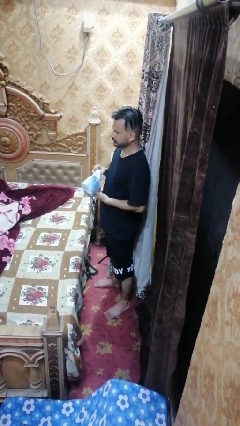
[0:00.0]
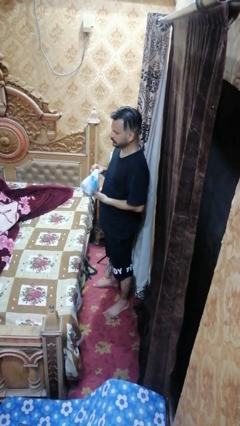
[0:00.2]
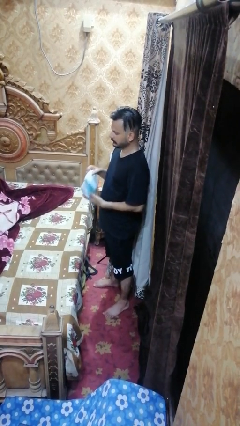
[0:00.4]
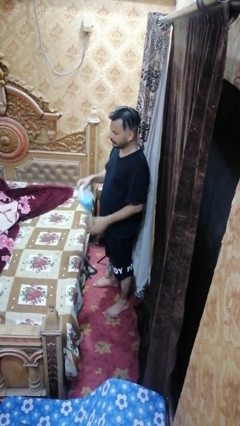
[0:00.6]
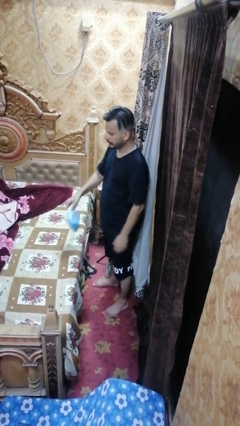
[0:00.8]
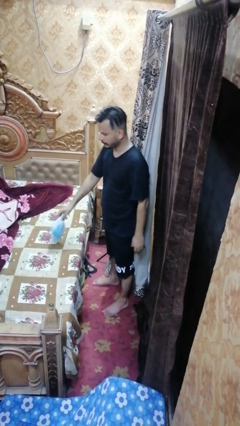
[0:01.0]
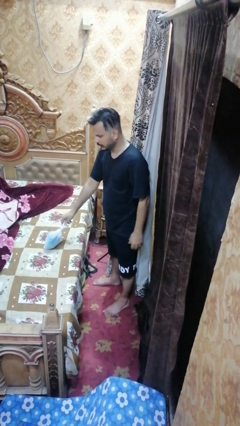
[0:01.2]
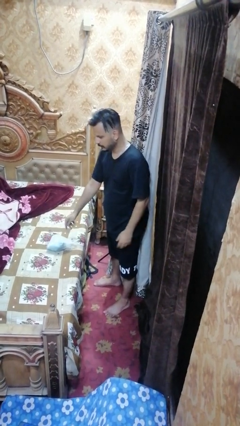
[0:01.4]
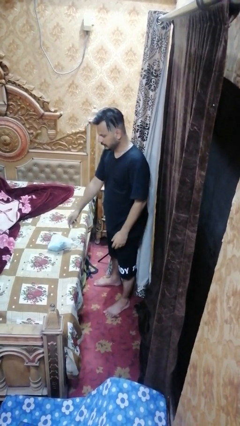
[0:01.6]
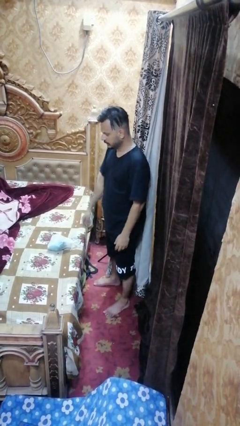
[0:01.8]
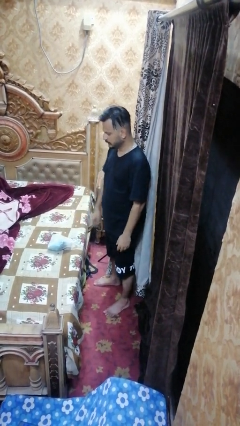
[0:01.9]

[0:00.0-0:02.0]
person puts down object on bed

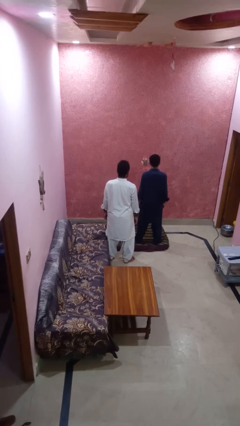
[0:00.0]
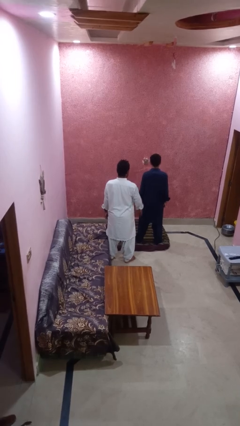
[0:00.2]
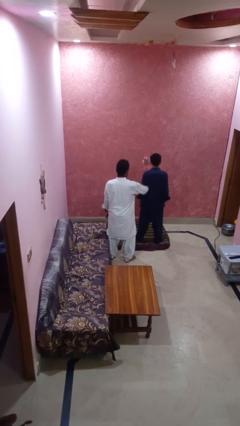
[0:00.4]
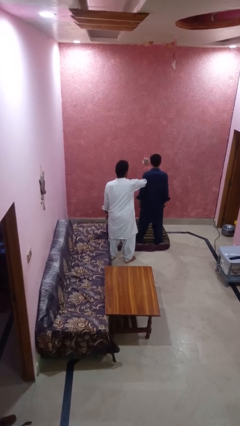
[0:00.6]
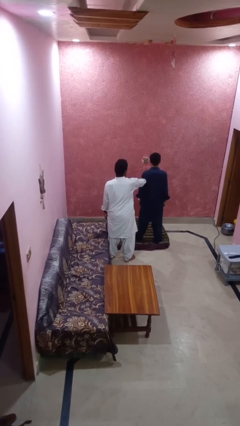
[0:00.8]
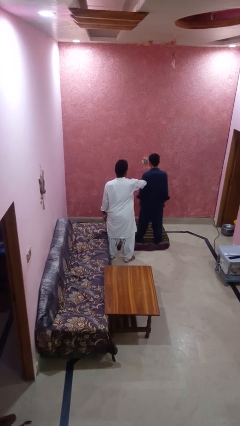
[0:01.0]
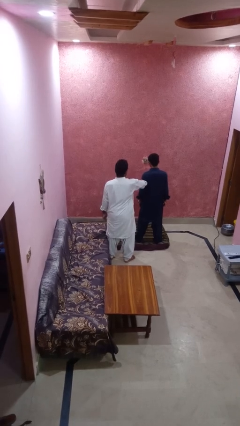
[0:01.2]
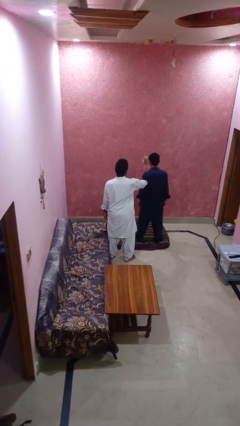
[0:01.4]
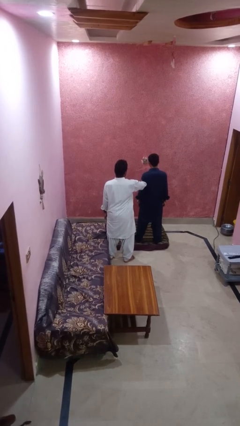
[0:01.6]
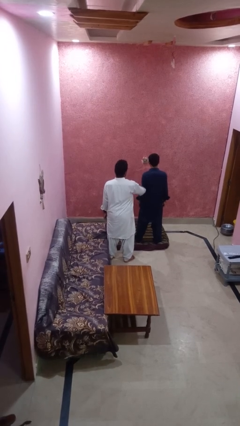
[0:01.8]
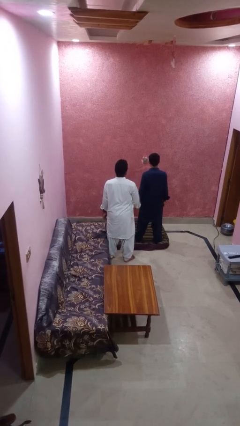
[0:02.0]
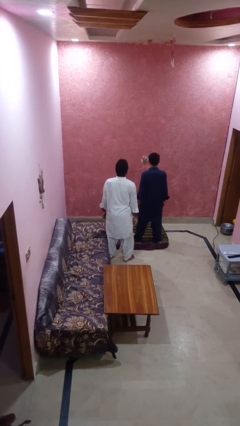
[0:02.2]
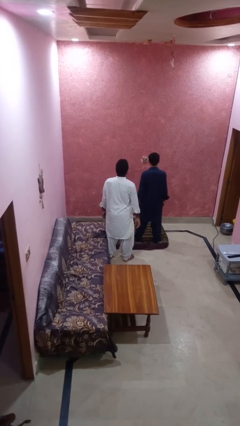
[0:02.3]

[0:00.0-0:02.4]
person grabs person by forearm

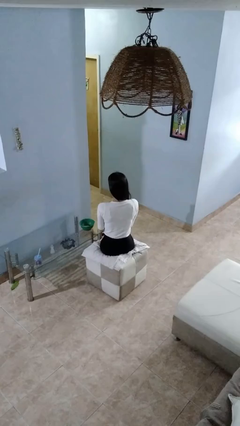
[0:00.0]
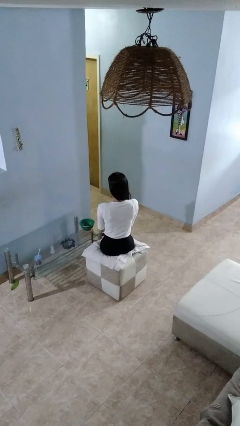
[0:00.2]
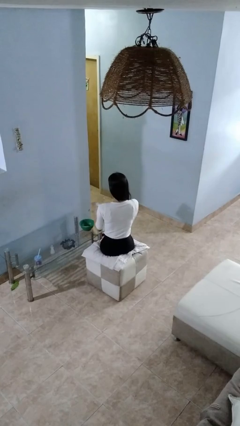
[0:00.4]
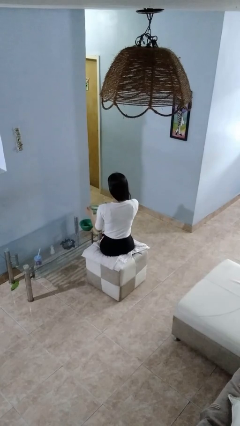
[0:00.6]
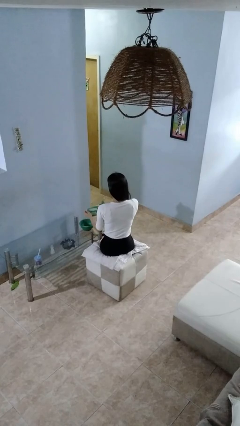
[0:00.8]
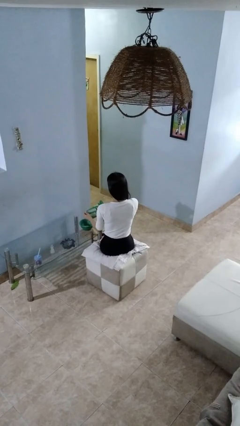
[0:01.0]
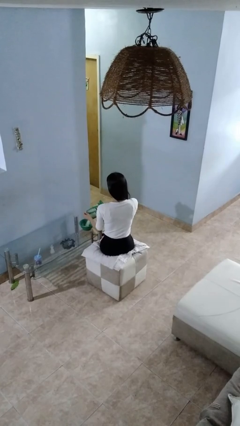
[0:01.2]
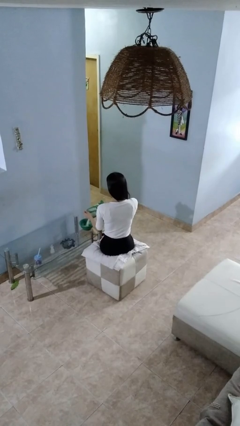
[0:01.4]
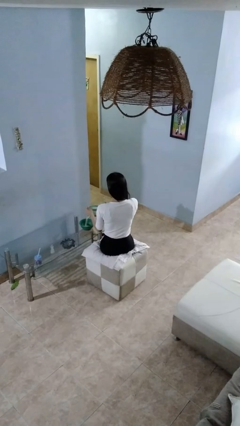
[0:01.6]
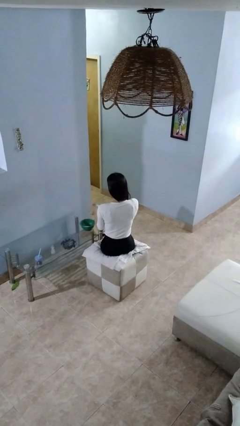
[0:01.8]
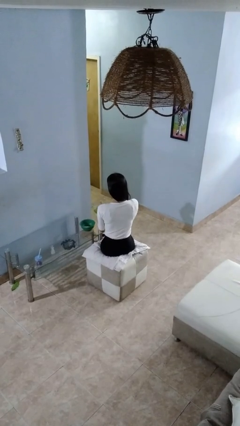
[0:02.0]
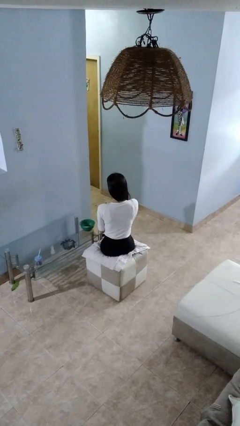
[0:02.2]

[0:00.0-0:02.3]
person pours into bowl

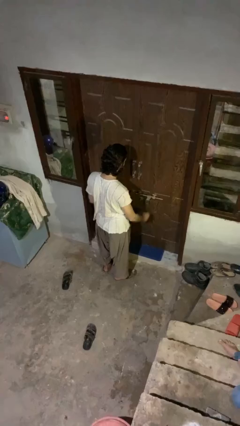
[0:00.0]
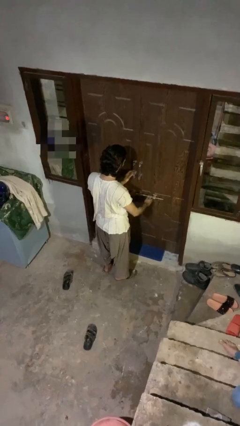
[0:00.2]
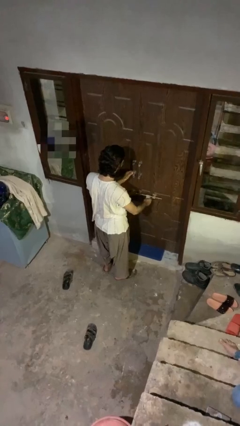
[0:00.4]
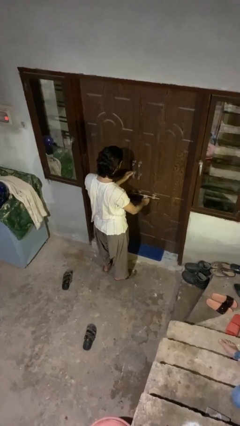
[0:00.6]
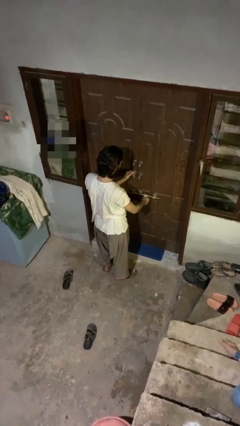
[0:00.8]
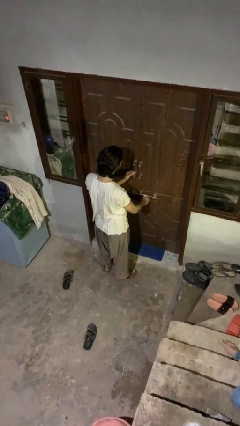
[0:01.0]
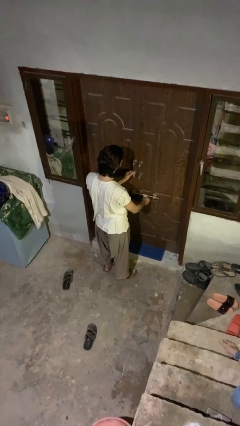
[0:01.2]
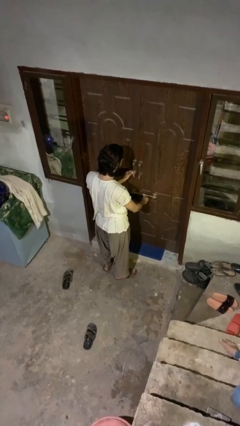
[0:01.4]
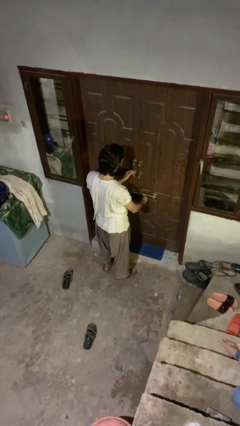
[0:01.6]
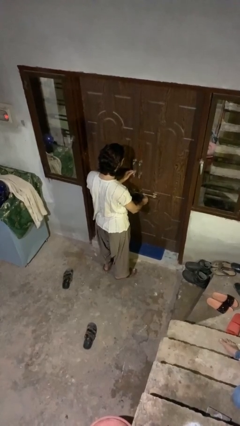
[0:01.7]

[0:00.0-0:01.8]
person locks door with keys

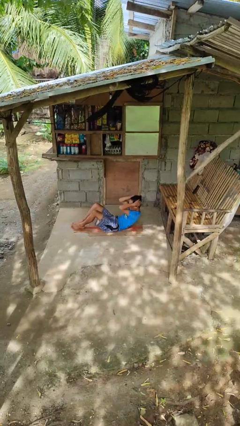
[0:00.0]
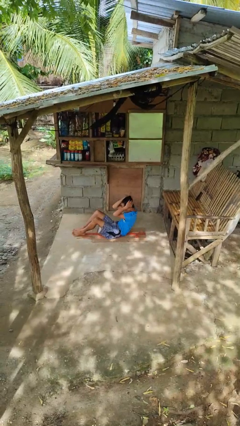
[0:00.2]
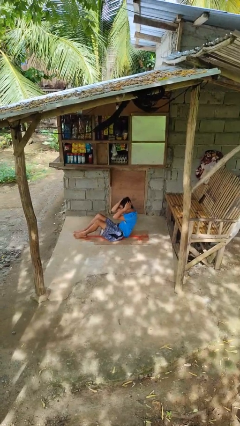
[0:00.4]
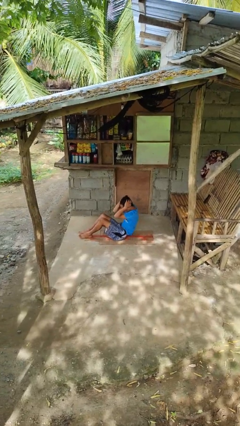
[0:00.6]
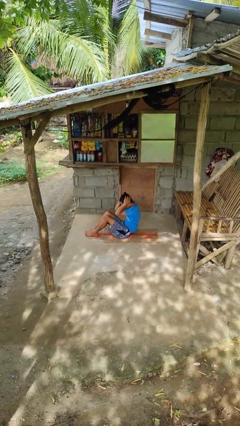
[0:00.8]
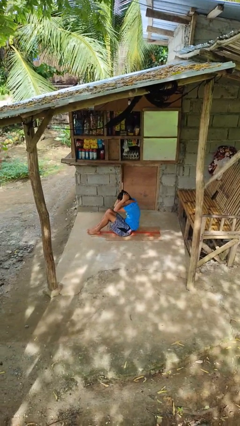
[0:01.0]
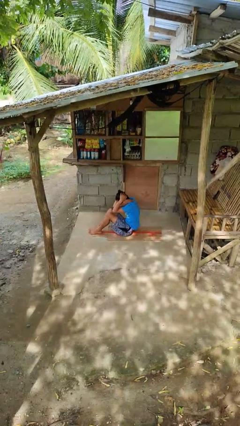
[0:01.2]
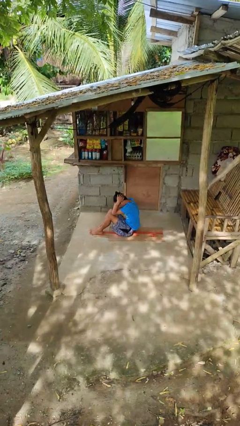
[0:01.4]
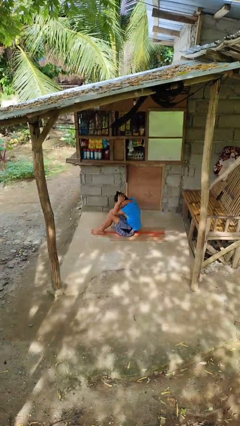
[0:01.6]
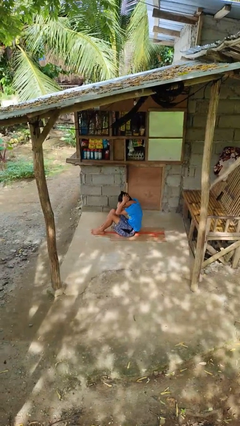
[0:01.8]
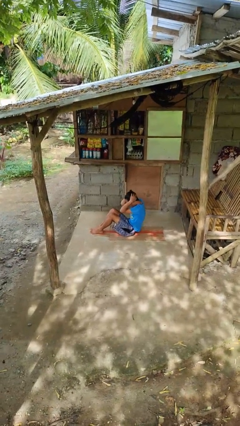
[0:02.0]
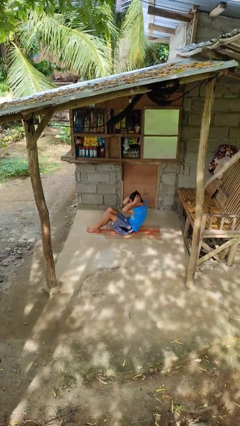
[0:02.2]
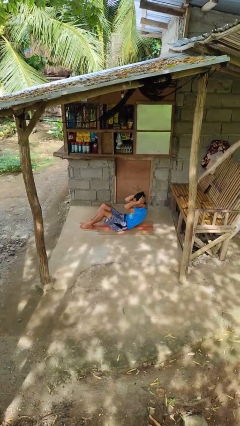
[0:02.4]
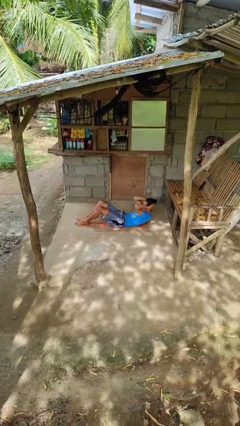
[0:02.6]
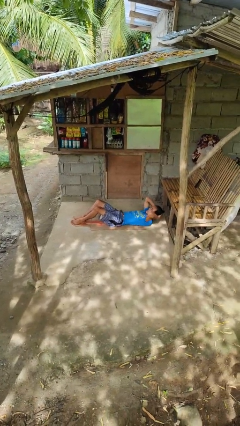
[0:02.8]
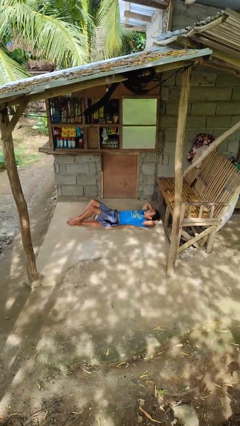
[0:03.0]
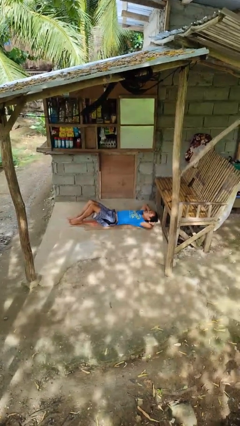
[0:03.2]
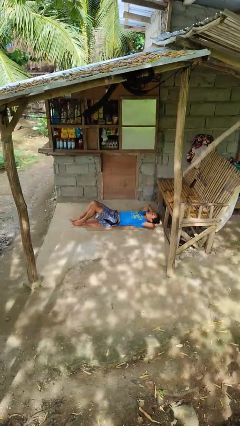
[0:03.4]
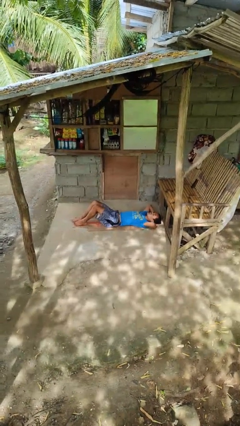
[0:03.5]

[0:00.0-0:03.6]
person exercises with situp

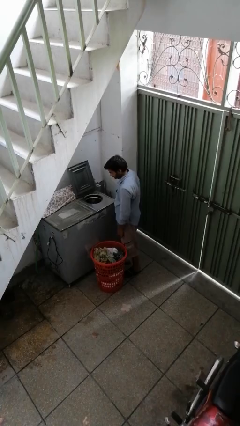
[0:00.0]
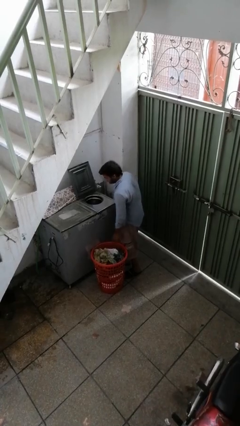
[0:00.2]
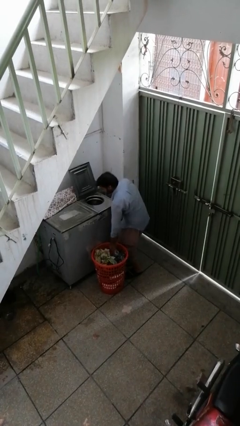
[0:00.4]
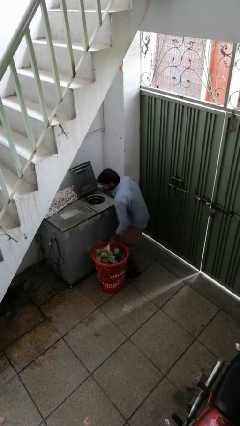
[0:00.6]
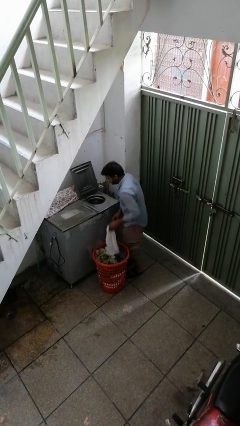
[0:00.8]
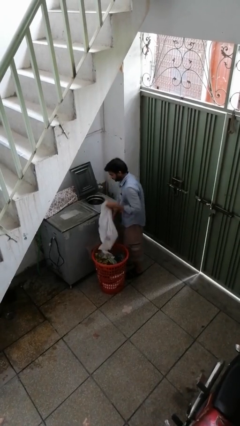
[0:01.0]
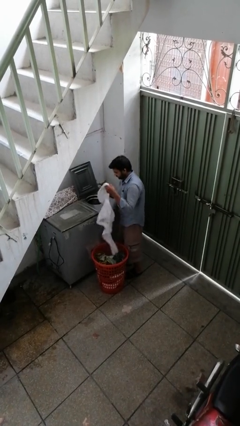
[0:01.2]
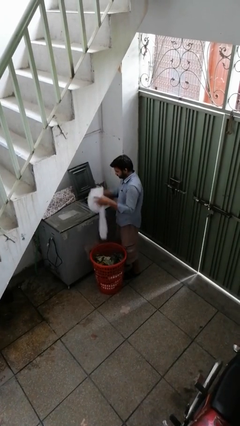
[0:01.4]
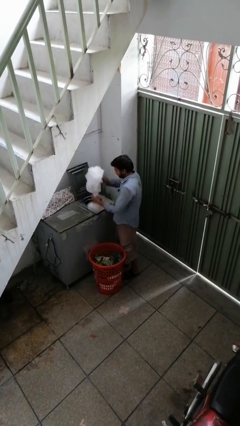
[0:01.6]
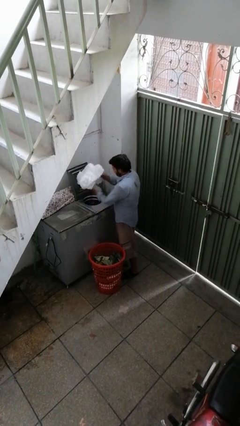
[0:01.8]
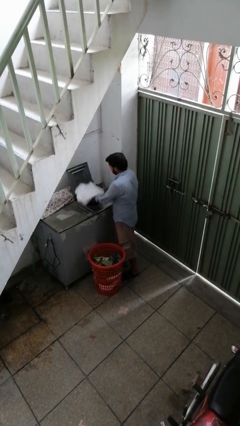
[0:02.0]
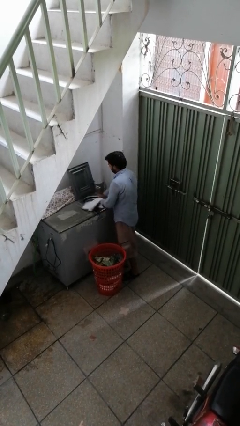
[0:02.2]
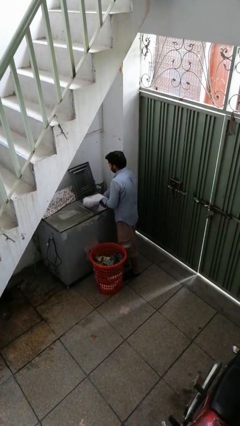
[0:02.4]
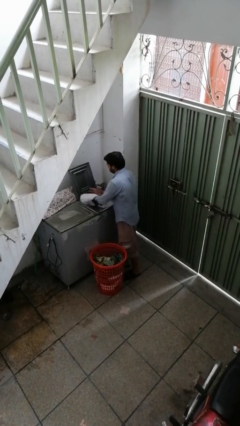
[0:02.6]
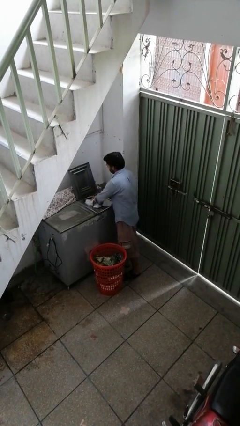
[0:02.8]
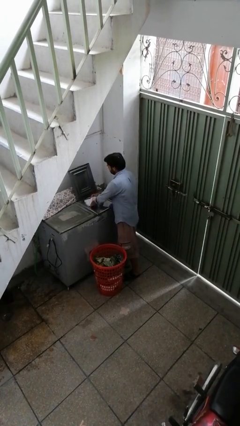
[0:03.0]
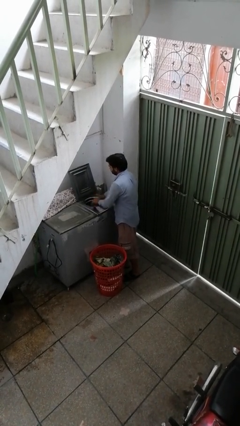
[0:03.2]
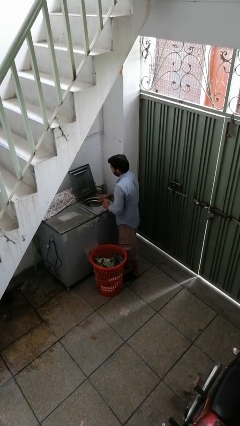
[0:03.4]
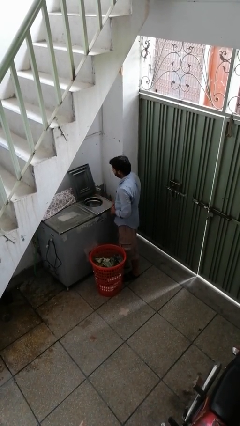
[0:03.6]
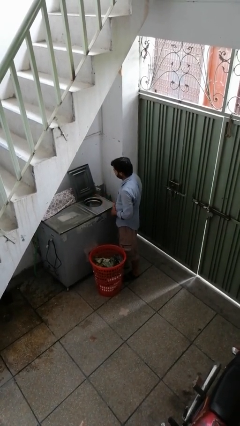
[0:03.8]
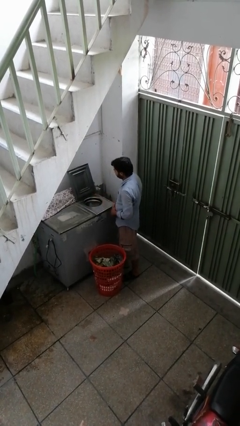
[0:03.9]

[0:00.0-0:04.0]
person loads dryer

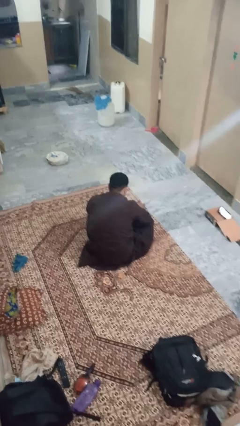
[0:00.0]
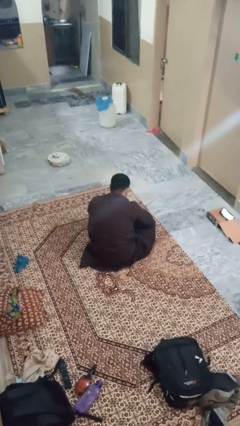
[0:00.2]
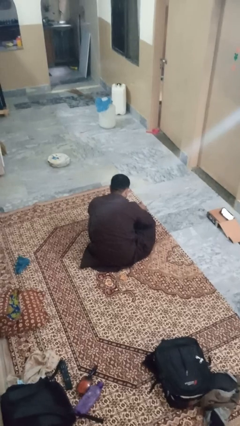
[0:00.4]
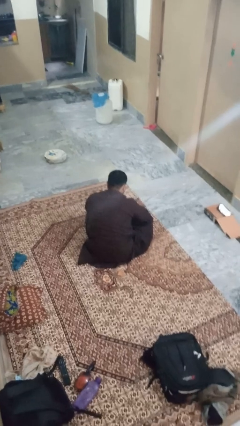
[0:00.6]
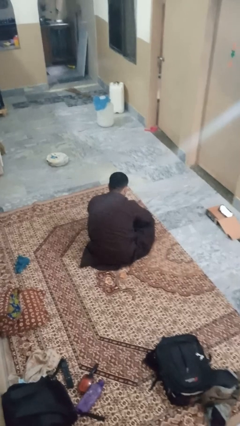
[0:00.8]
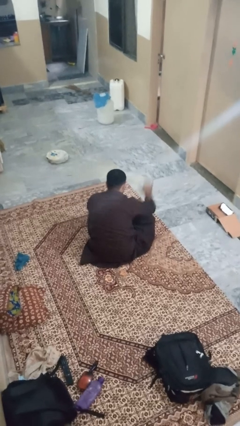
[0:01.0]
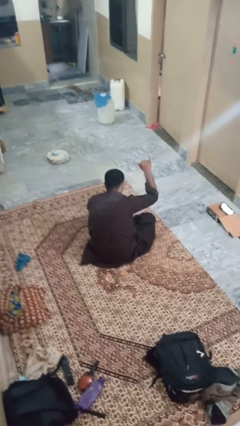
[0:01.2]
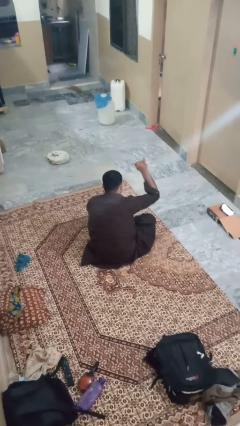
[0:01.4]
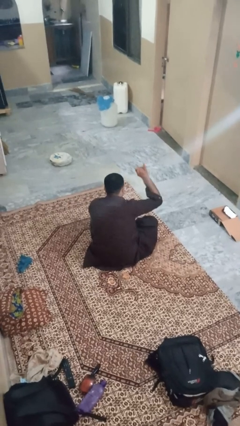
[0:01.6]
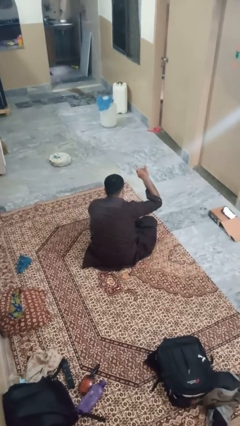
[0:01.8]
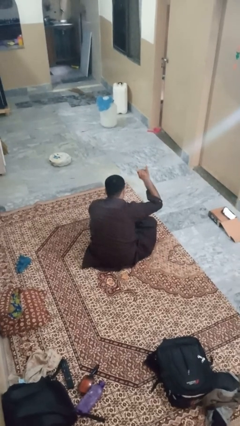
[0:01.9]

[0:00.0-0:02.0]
person gestures hang loose
